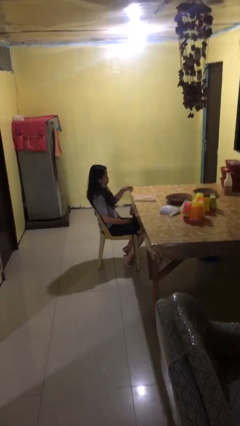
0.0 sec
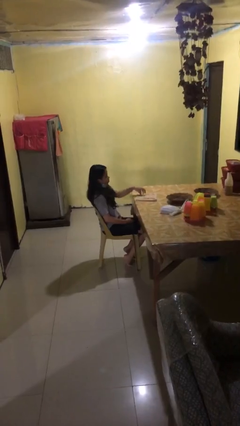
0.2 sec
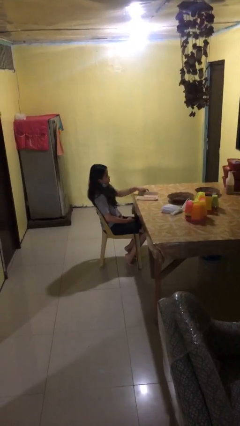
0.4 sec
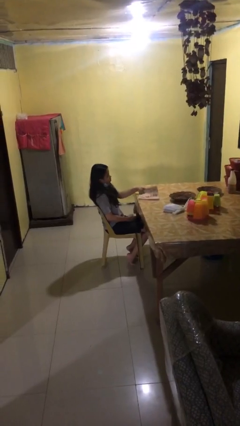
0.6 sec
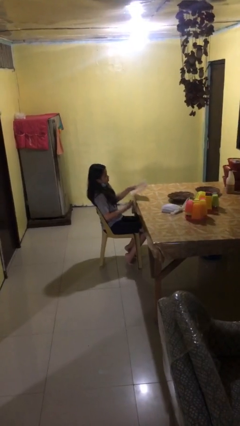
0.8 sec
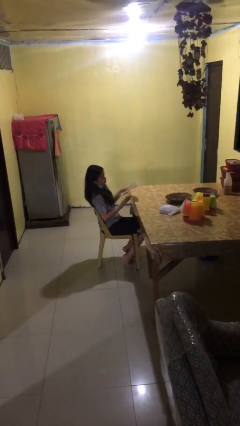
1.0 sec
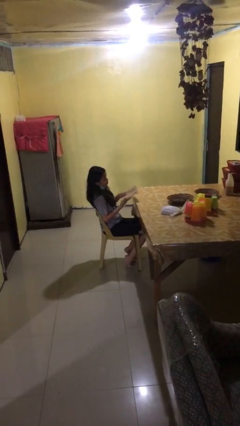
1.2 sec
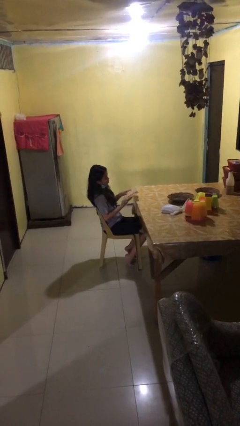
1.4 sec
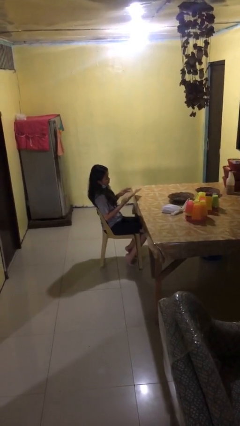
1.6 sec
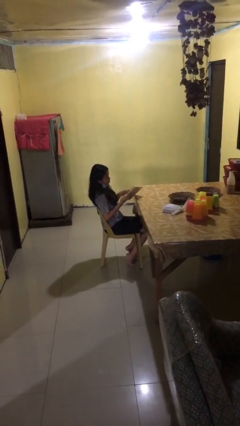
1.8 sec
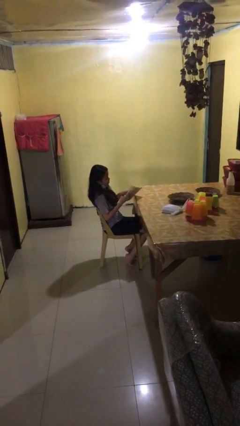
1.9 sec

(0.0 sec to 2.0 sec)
person picks up object from table

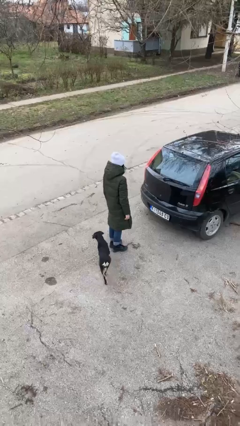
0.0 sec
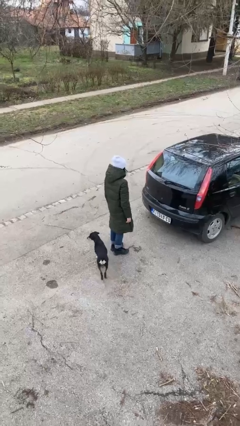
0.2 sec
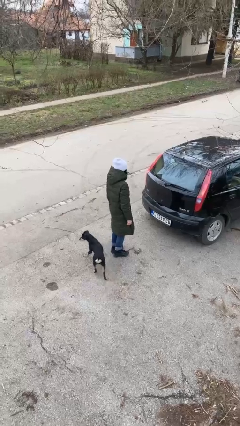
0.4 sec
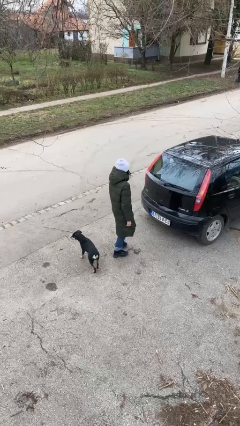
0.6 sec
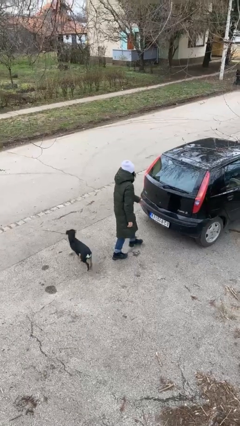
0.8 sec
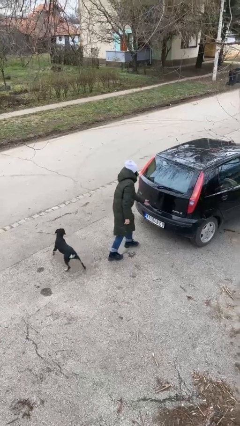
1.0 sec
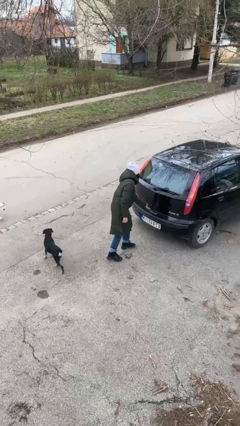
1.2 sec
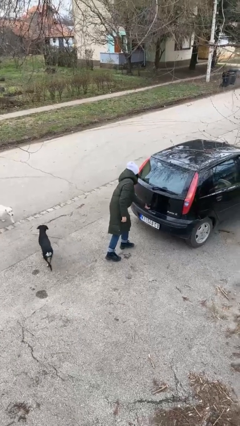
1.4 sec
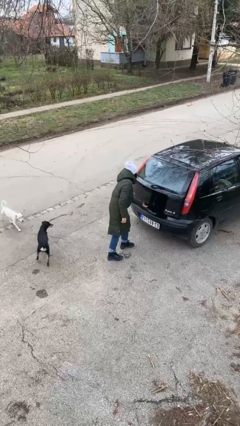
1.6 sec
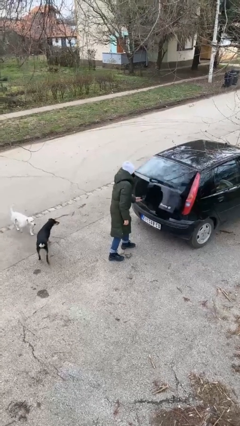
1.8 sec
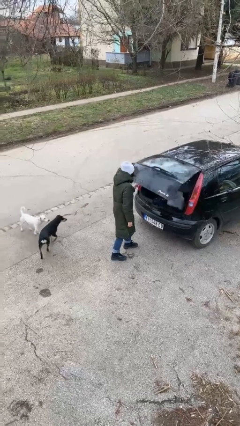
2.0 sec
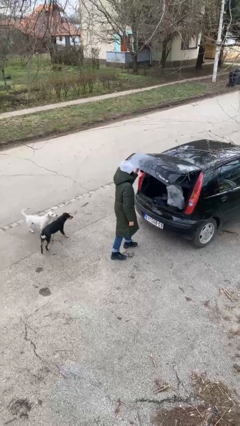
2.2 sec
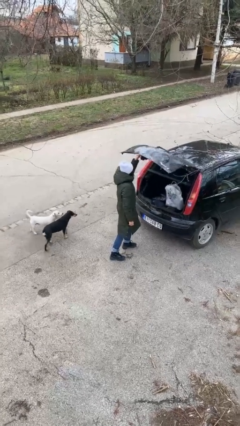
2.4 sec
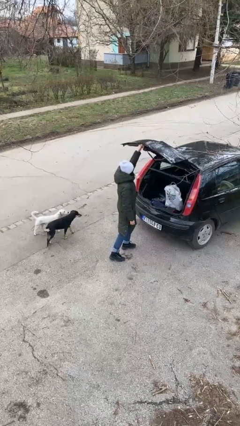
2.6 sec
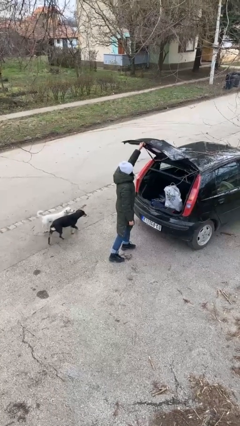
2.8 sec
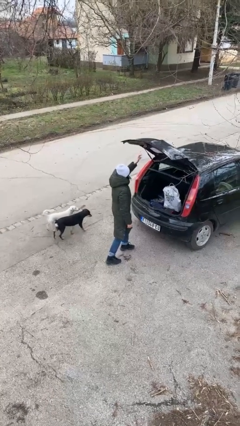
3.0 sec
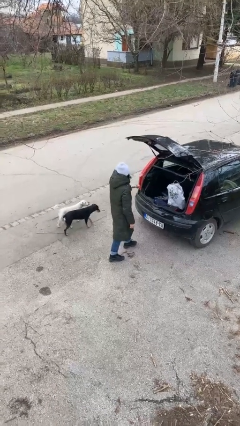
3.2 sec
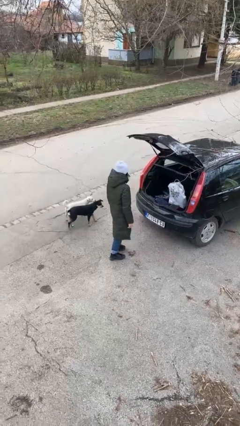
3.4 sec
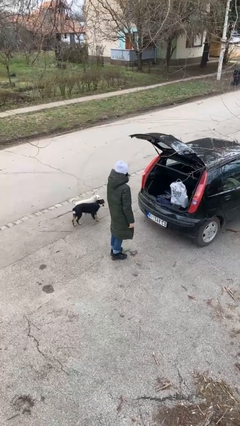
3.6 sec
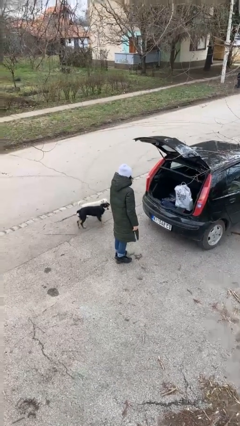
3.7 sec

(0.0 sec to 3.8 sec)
person opens car trunk

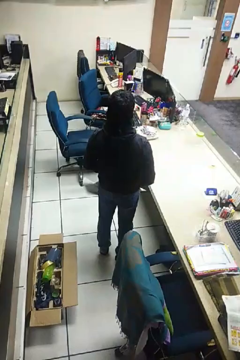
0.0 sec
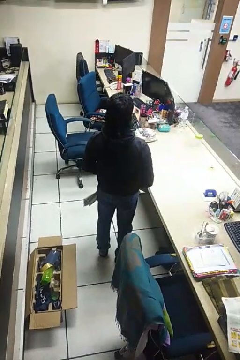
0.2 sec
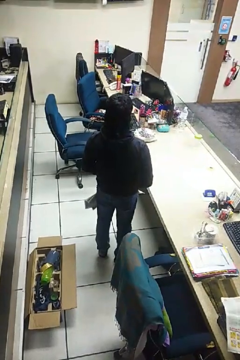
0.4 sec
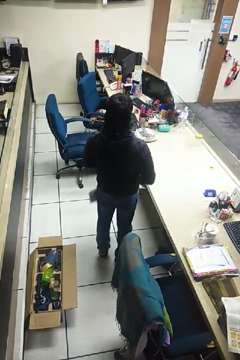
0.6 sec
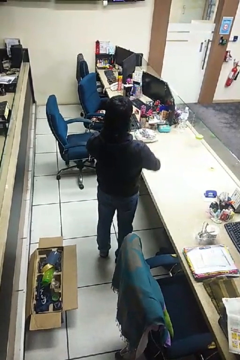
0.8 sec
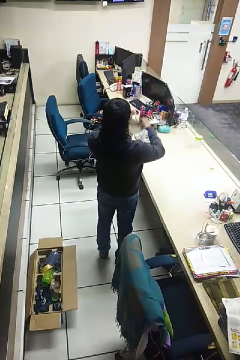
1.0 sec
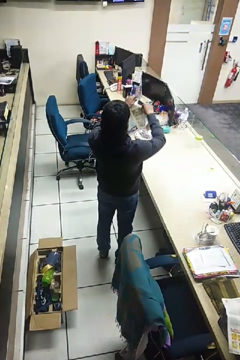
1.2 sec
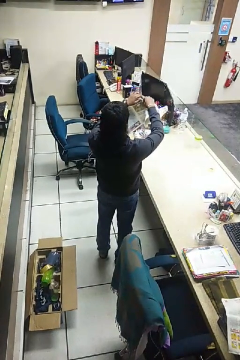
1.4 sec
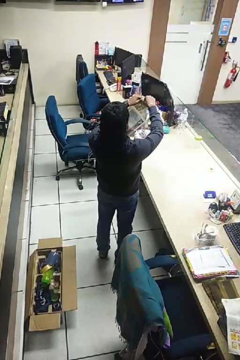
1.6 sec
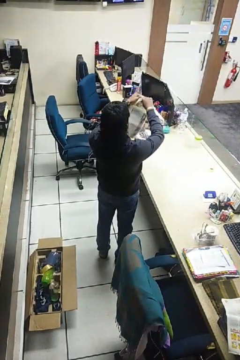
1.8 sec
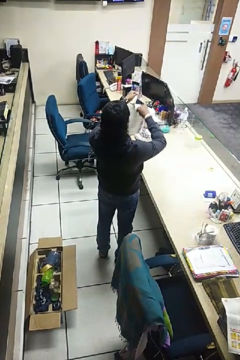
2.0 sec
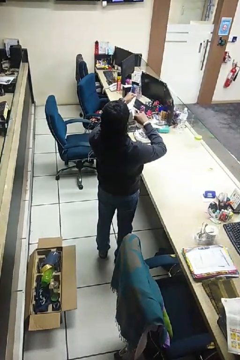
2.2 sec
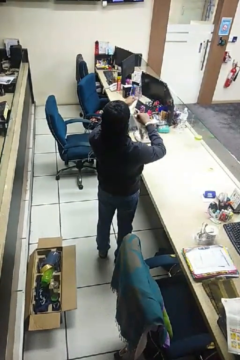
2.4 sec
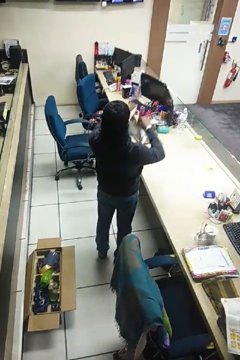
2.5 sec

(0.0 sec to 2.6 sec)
person tears paper

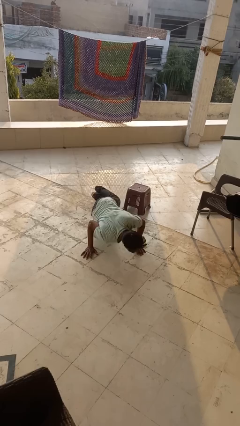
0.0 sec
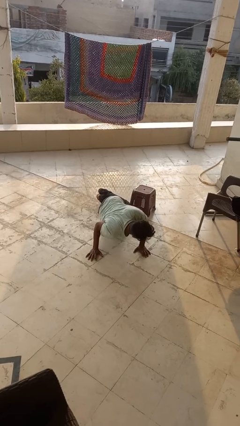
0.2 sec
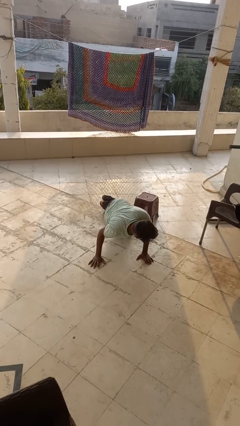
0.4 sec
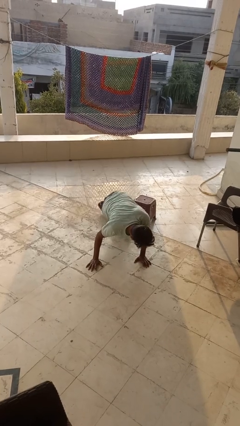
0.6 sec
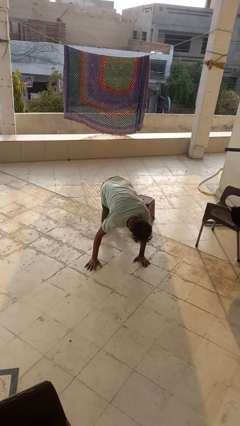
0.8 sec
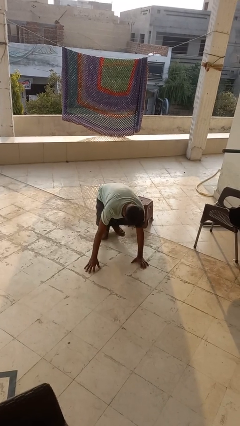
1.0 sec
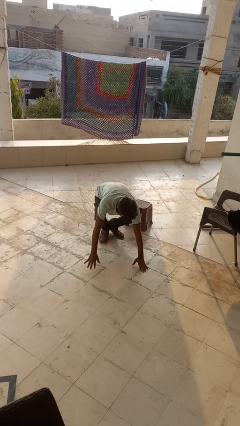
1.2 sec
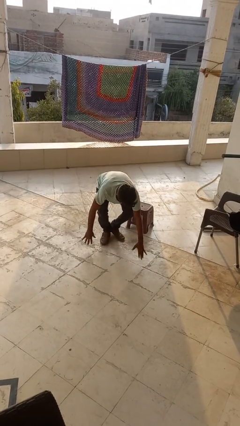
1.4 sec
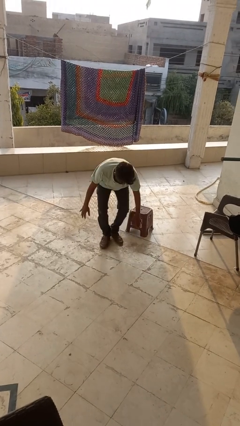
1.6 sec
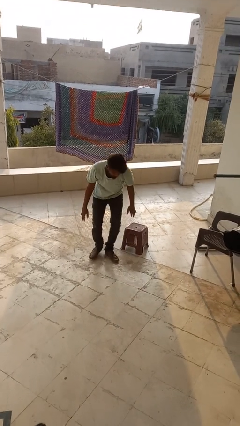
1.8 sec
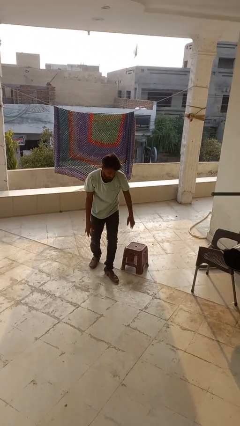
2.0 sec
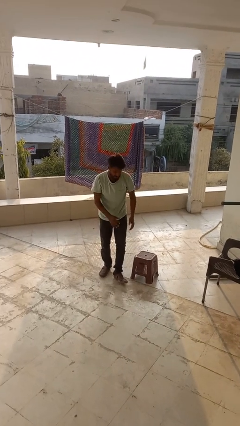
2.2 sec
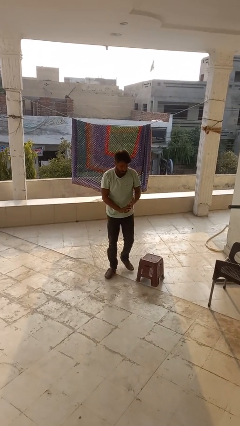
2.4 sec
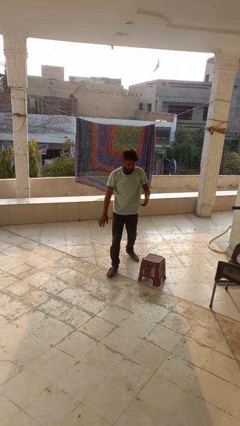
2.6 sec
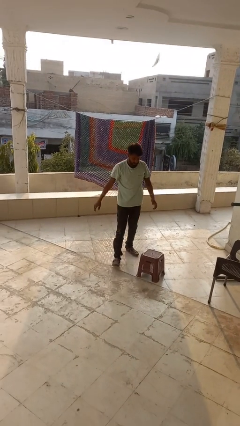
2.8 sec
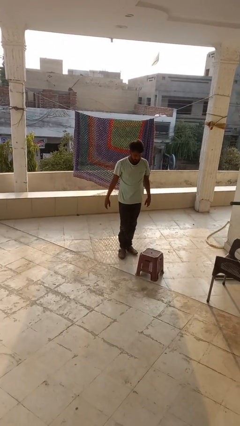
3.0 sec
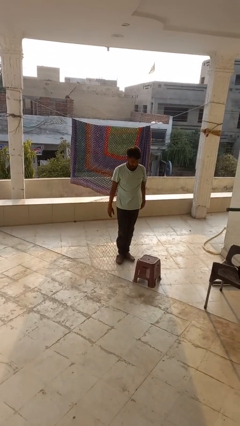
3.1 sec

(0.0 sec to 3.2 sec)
person stands up from floor

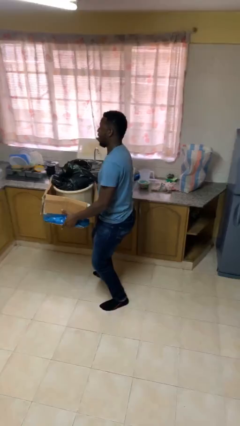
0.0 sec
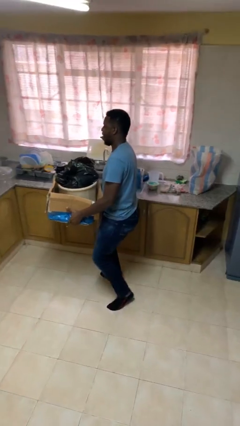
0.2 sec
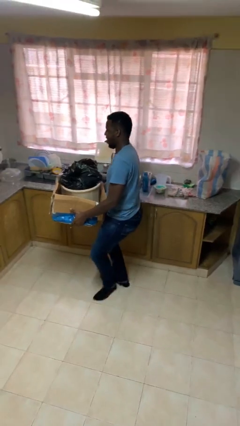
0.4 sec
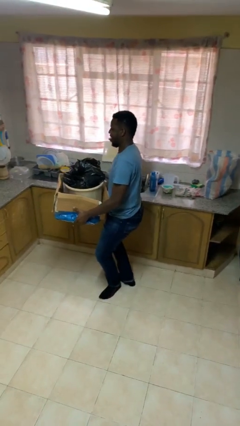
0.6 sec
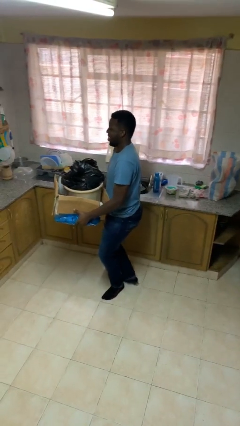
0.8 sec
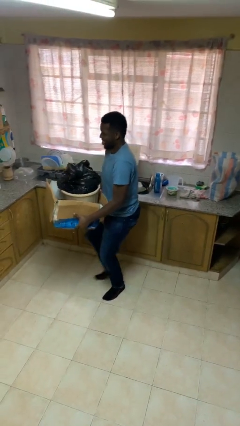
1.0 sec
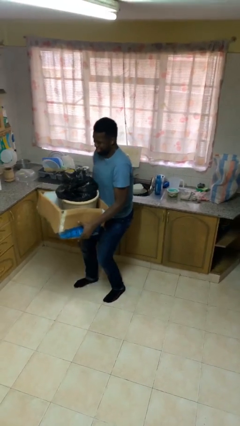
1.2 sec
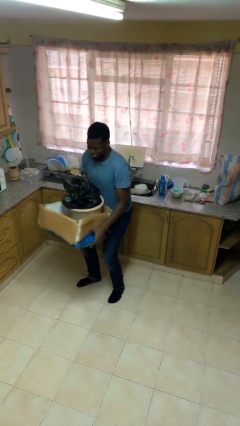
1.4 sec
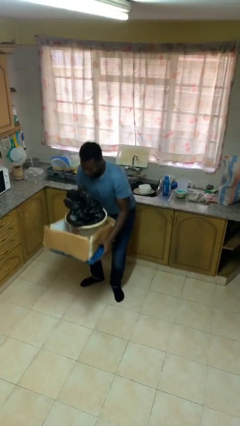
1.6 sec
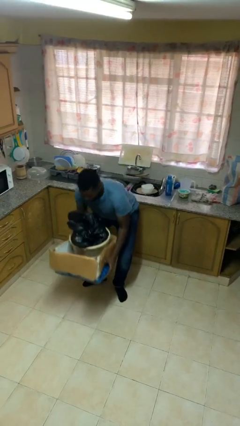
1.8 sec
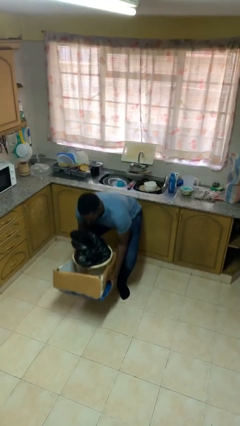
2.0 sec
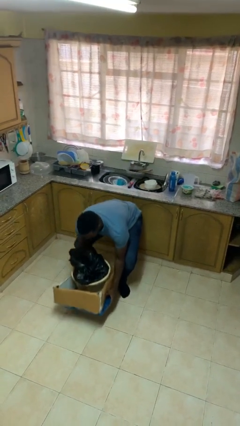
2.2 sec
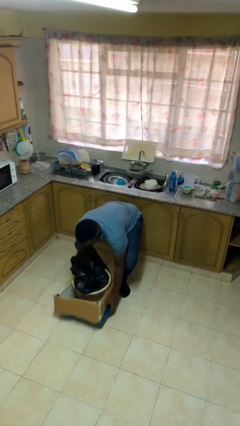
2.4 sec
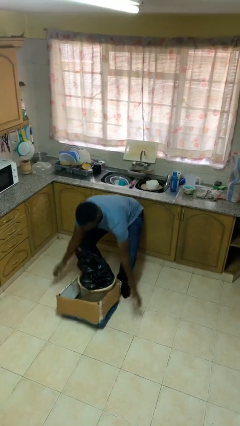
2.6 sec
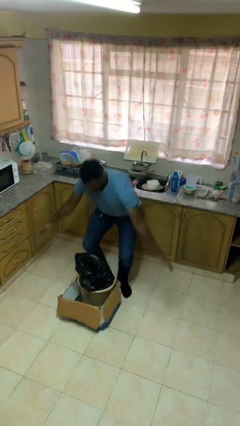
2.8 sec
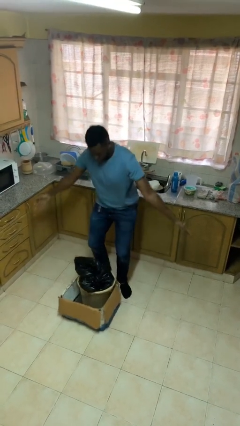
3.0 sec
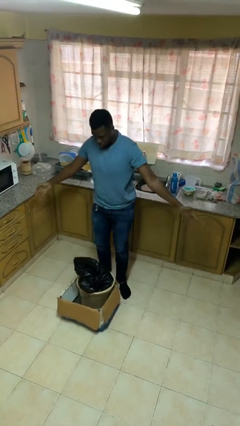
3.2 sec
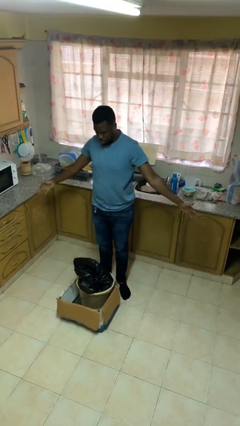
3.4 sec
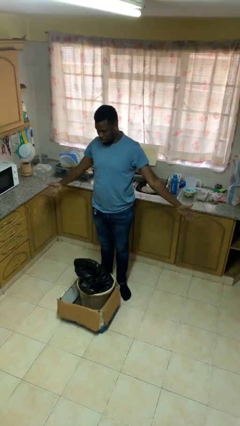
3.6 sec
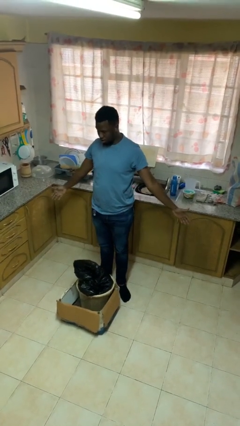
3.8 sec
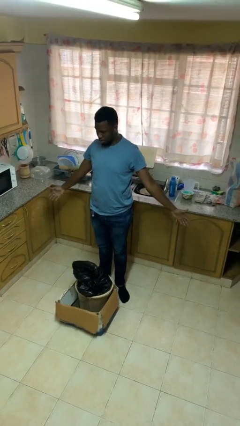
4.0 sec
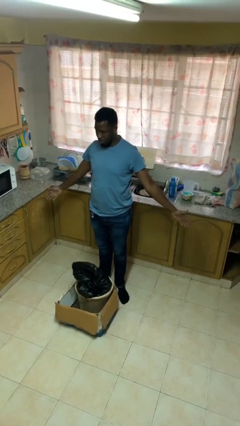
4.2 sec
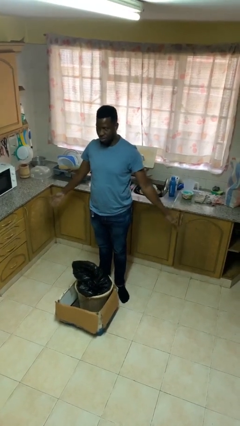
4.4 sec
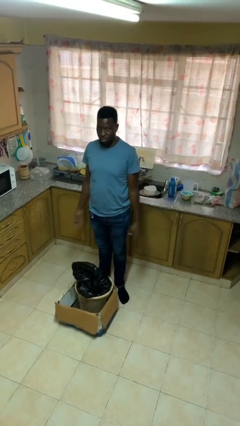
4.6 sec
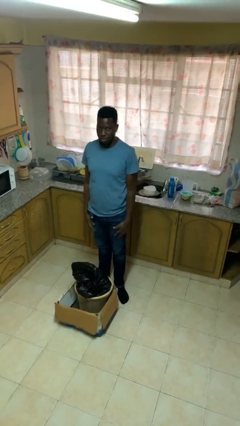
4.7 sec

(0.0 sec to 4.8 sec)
person puts down object on floor

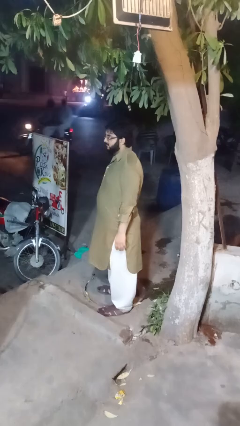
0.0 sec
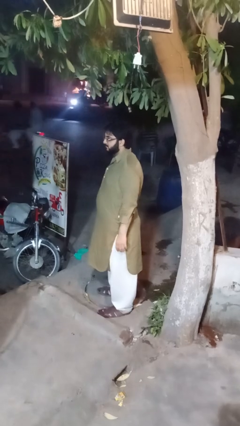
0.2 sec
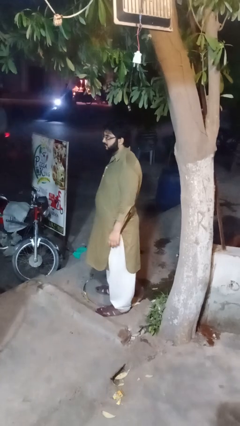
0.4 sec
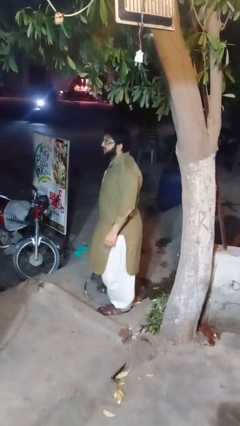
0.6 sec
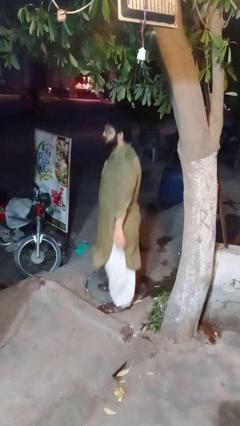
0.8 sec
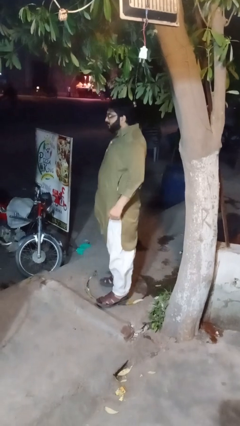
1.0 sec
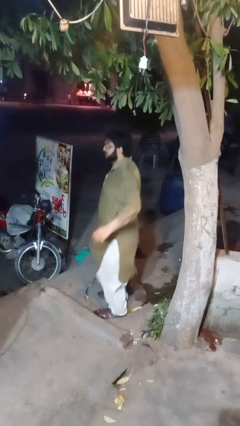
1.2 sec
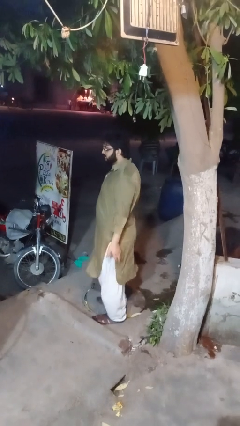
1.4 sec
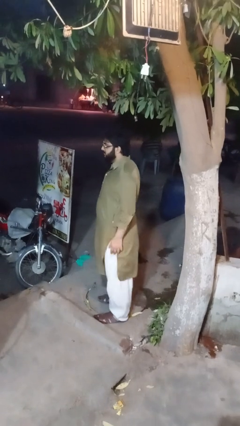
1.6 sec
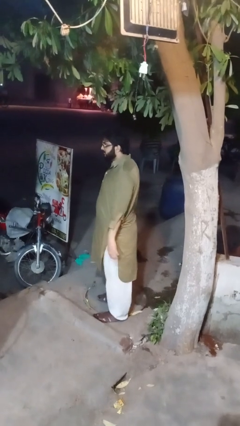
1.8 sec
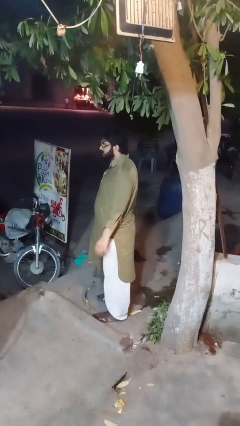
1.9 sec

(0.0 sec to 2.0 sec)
person jumps
